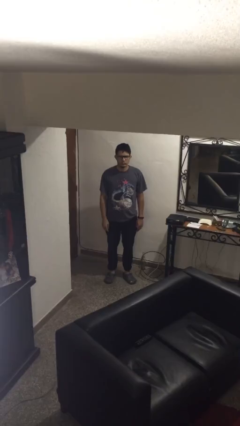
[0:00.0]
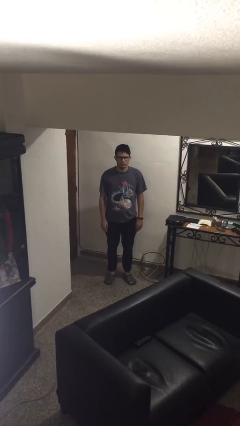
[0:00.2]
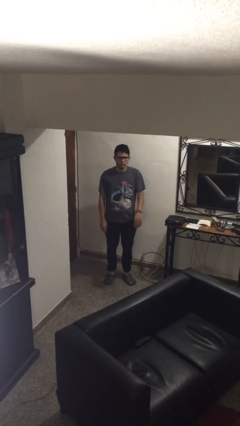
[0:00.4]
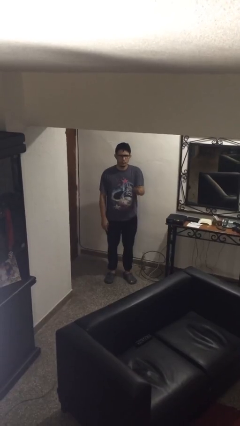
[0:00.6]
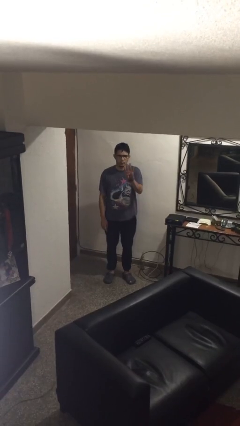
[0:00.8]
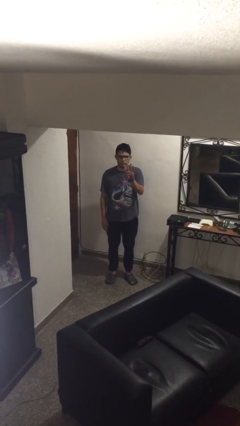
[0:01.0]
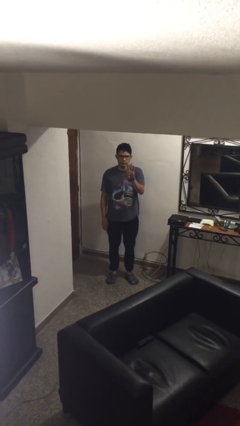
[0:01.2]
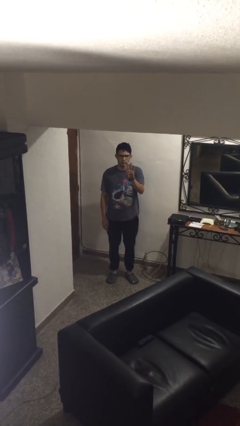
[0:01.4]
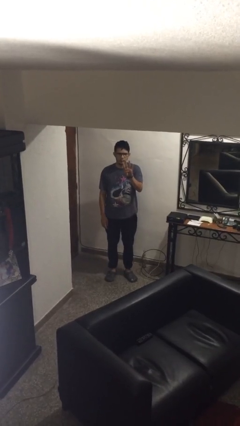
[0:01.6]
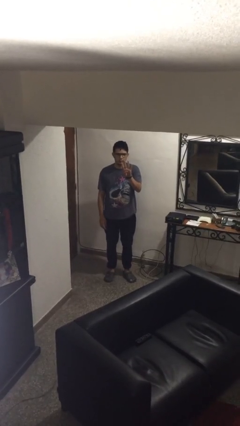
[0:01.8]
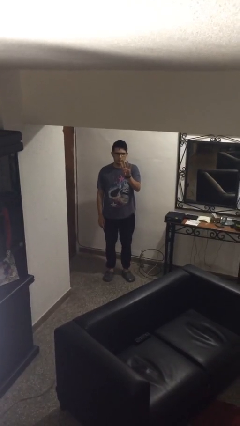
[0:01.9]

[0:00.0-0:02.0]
person gestures number four

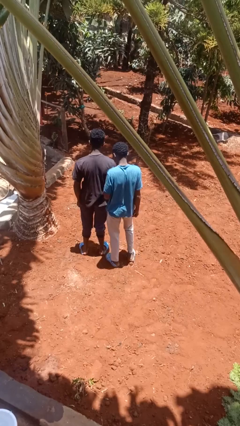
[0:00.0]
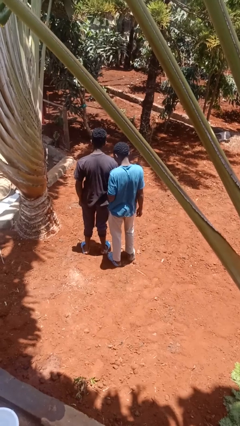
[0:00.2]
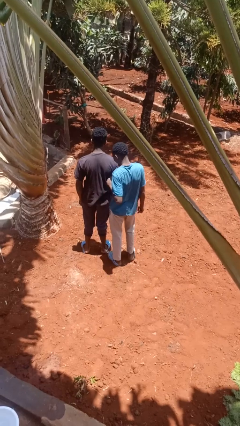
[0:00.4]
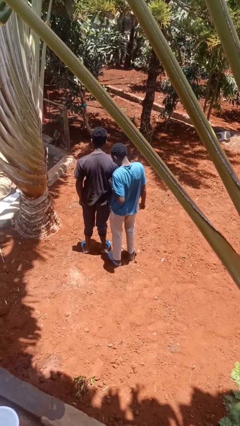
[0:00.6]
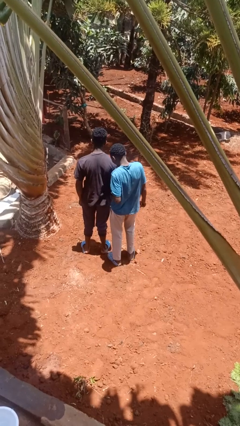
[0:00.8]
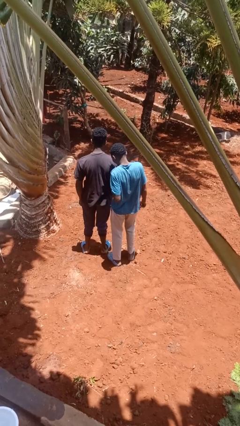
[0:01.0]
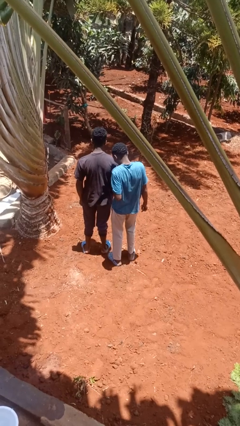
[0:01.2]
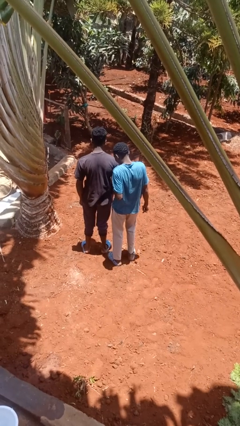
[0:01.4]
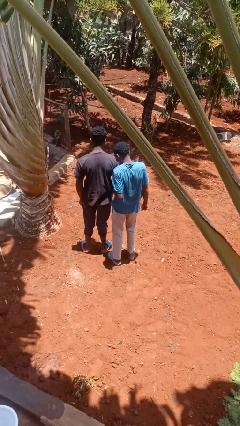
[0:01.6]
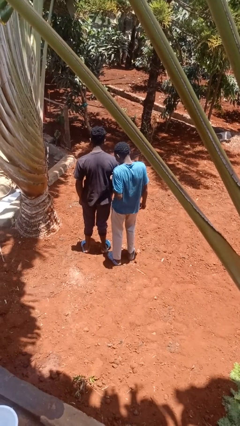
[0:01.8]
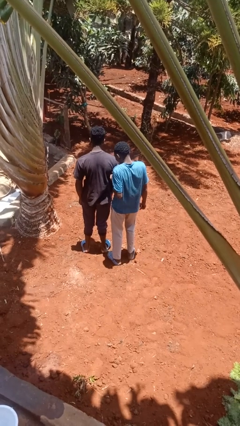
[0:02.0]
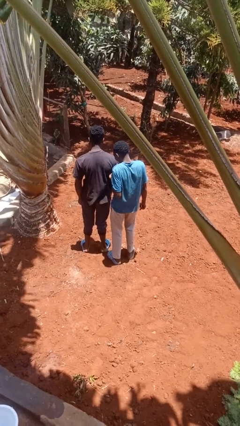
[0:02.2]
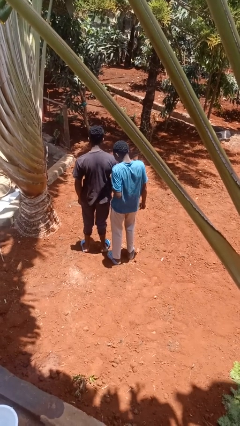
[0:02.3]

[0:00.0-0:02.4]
person tickles person

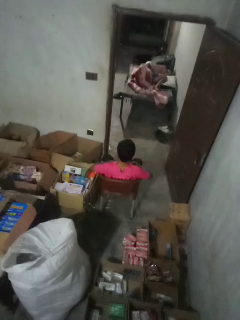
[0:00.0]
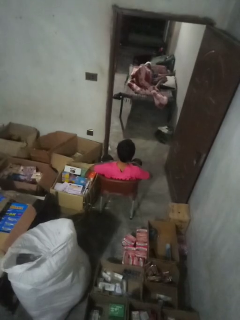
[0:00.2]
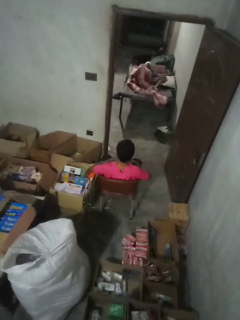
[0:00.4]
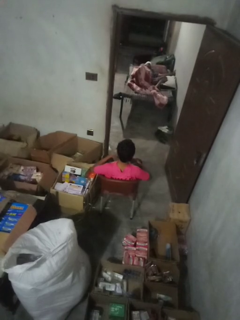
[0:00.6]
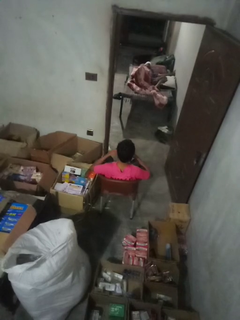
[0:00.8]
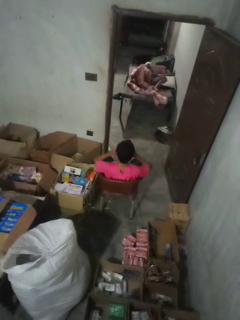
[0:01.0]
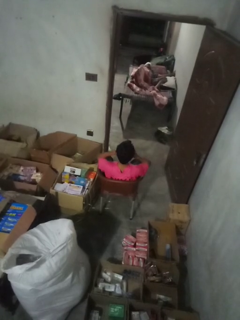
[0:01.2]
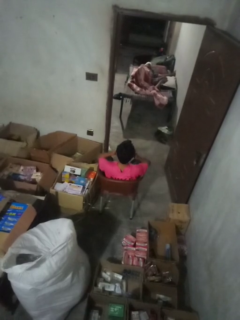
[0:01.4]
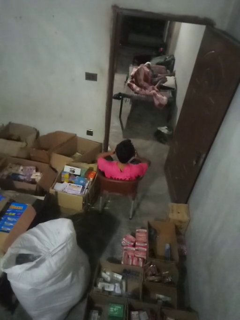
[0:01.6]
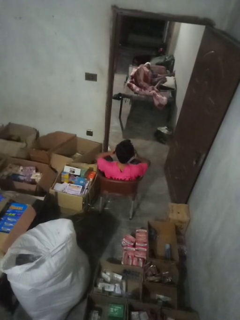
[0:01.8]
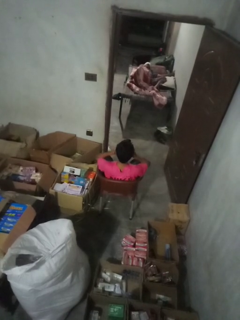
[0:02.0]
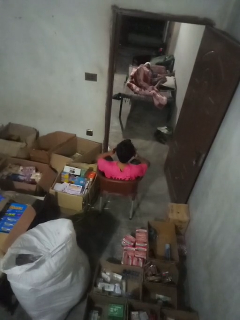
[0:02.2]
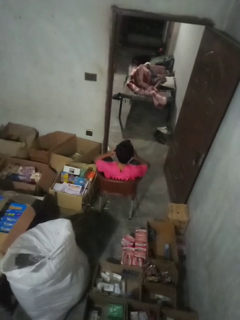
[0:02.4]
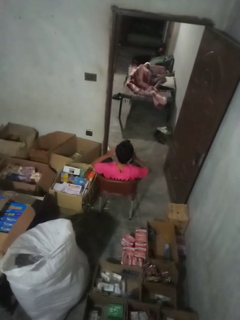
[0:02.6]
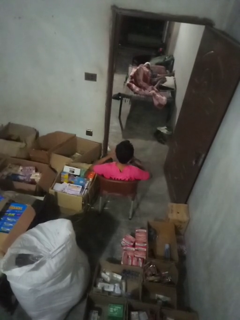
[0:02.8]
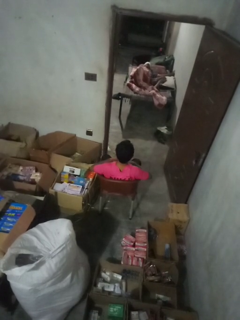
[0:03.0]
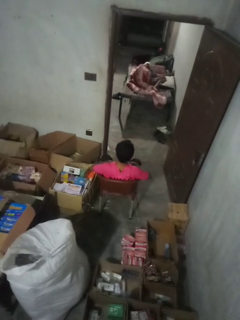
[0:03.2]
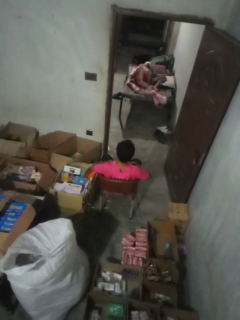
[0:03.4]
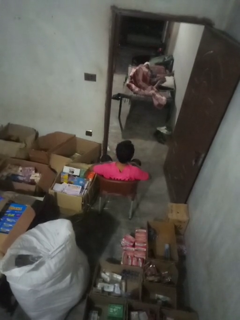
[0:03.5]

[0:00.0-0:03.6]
person rubs eyes

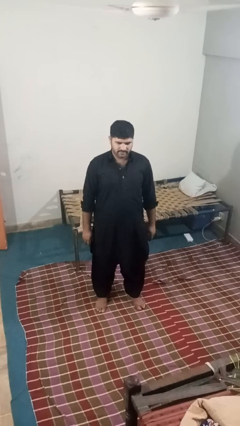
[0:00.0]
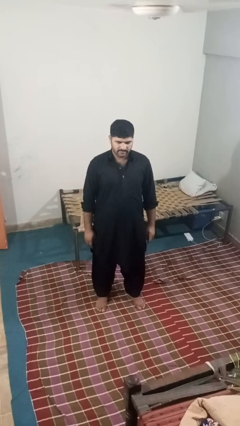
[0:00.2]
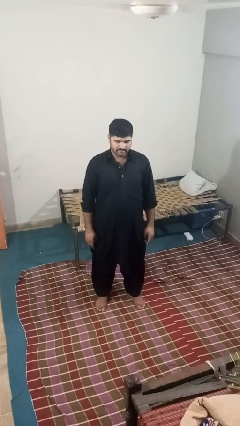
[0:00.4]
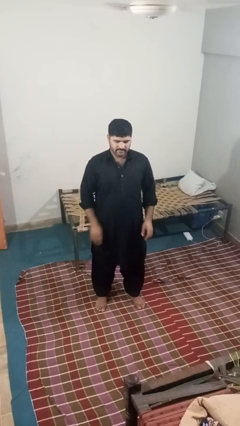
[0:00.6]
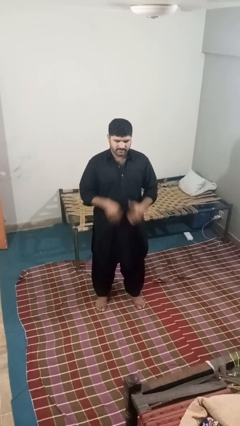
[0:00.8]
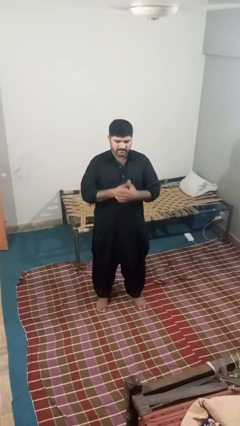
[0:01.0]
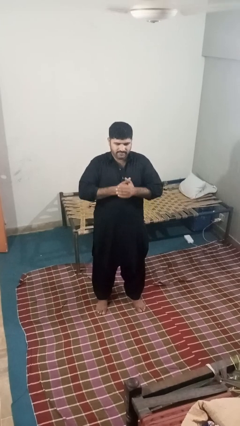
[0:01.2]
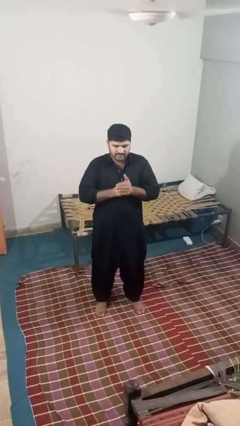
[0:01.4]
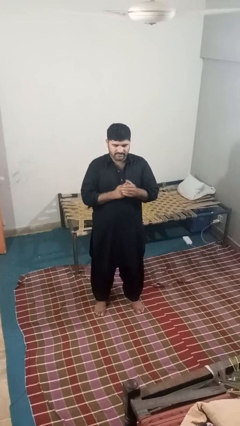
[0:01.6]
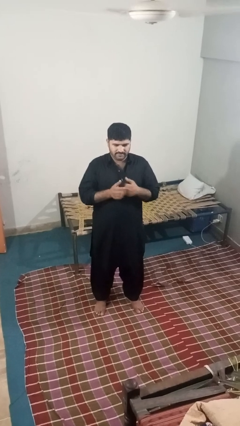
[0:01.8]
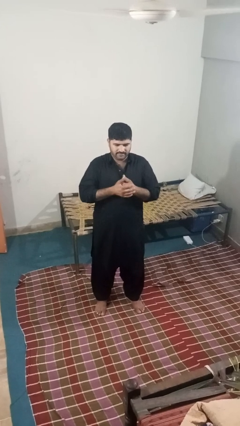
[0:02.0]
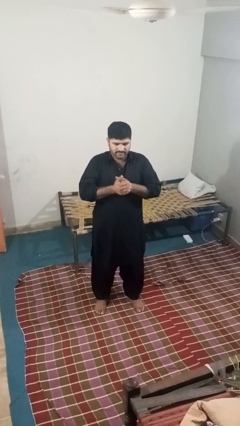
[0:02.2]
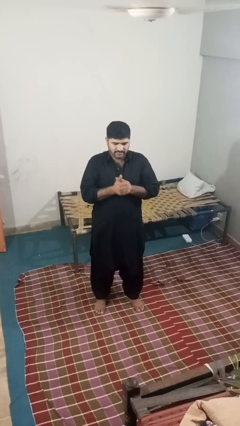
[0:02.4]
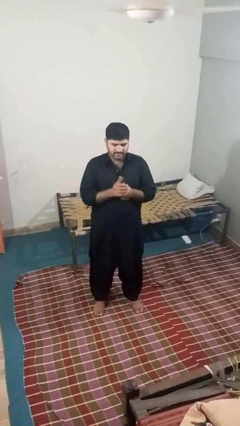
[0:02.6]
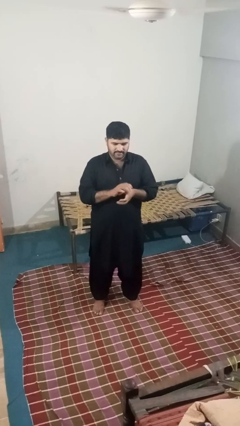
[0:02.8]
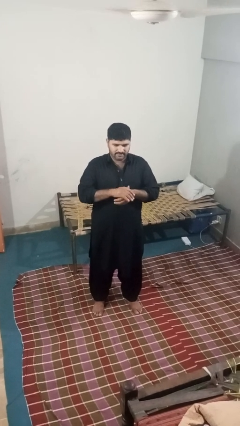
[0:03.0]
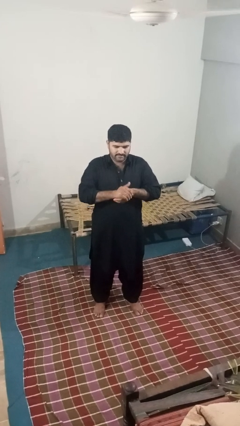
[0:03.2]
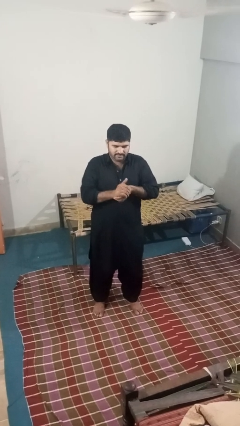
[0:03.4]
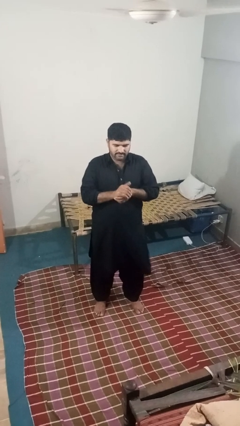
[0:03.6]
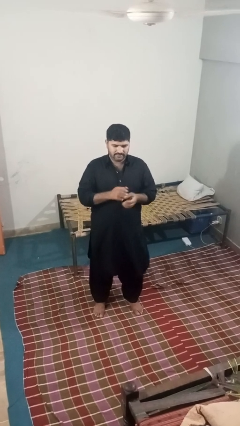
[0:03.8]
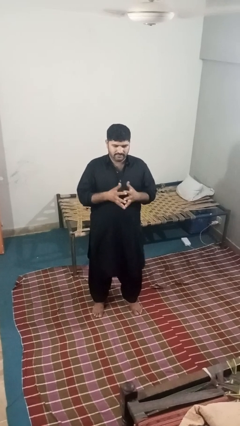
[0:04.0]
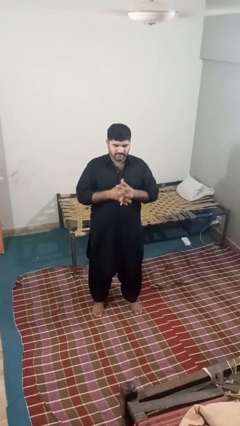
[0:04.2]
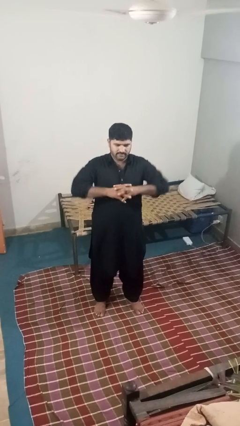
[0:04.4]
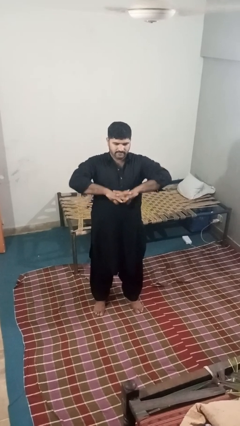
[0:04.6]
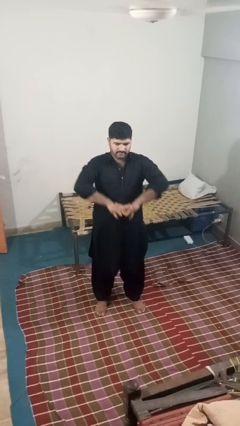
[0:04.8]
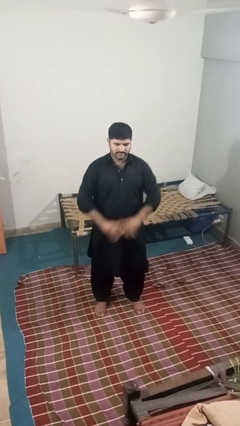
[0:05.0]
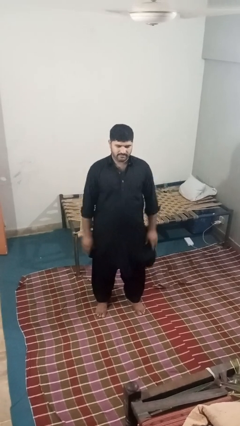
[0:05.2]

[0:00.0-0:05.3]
person cracks knuckles

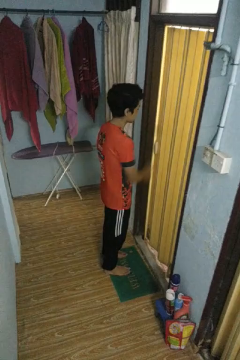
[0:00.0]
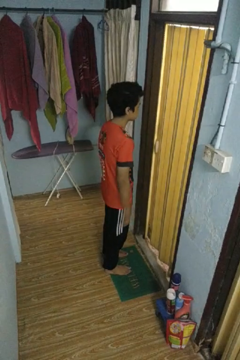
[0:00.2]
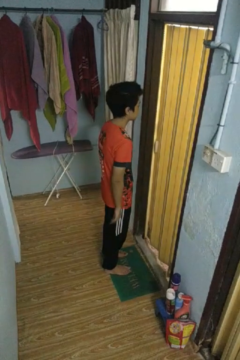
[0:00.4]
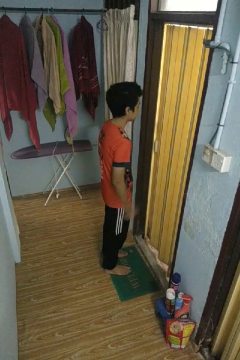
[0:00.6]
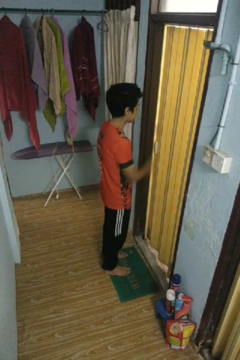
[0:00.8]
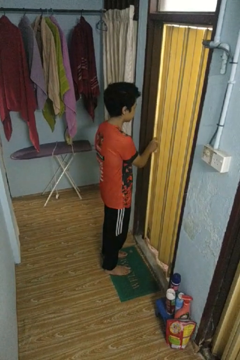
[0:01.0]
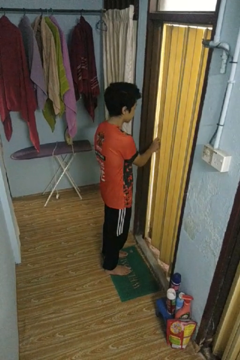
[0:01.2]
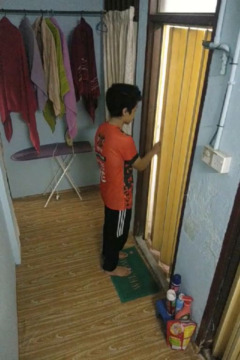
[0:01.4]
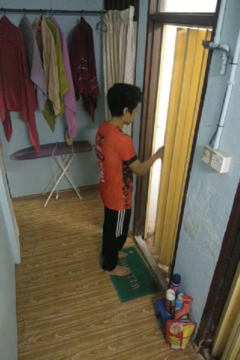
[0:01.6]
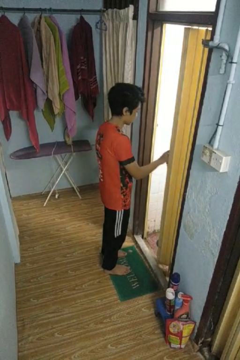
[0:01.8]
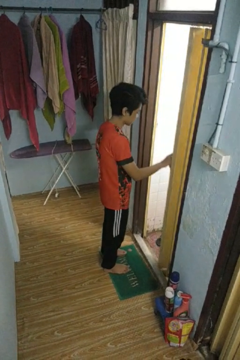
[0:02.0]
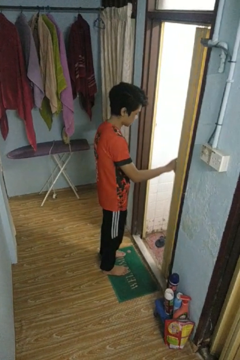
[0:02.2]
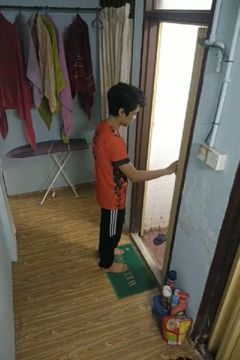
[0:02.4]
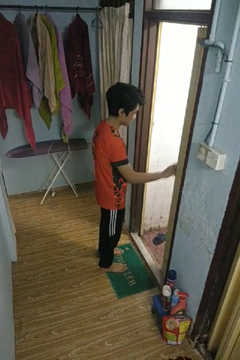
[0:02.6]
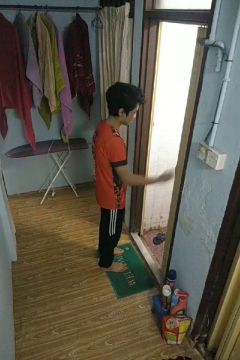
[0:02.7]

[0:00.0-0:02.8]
person opens sliding door

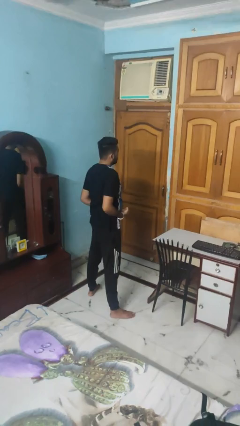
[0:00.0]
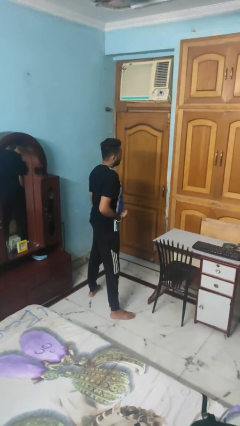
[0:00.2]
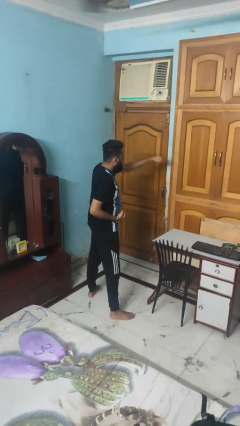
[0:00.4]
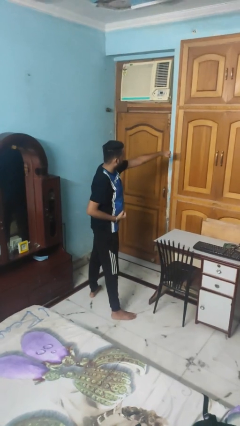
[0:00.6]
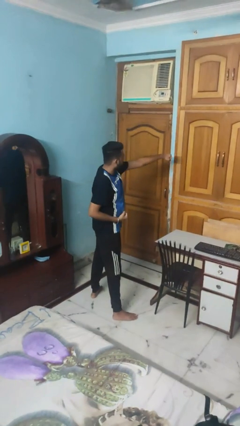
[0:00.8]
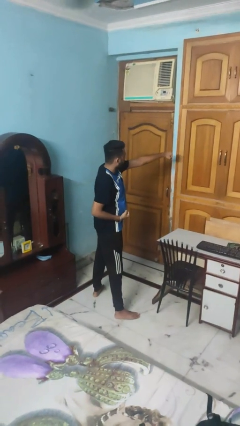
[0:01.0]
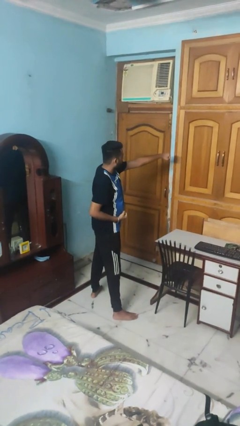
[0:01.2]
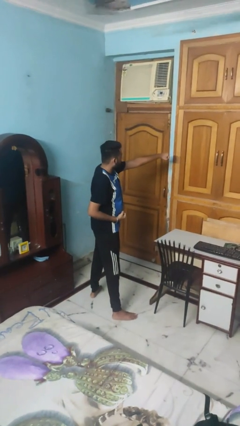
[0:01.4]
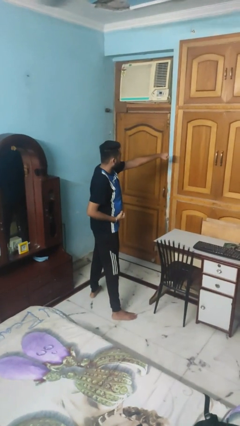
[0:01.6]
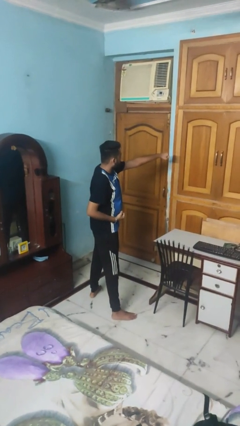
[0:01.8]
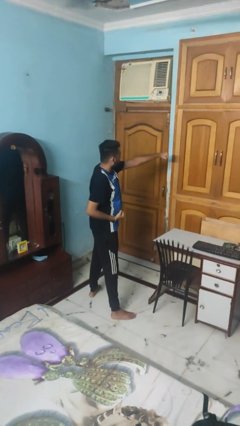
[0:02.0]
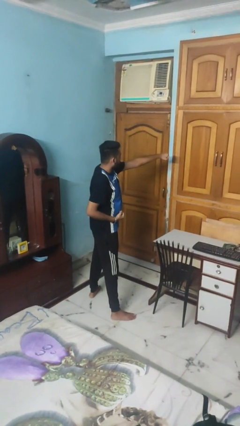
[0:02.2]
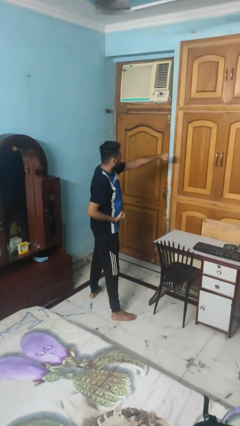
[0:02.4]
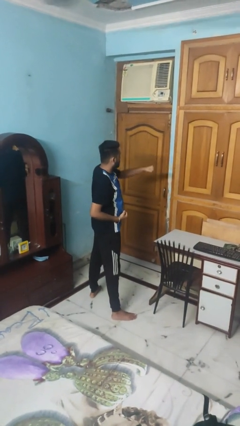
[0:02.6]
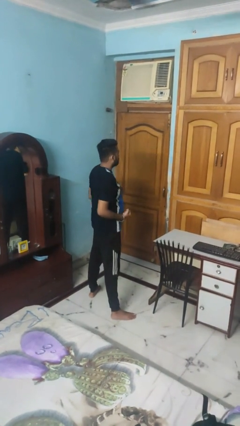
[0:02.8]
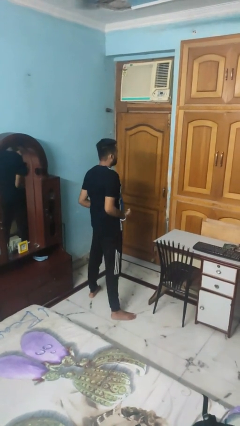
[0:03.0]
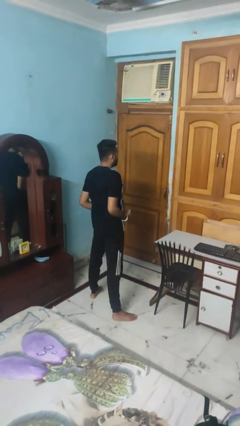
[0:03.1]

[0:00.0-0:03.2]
person punches
